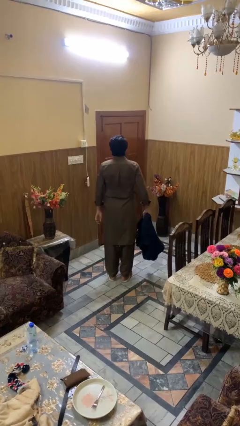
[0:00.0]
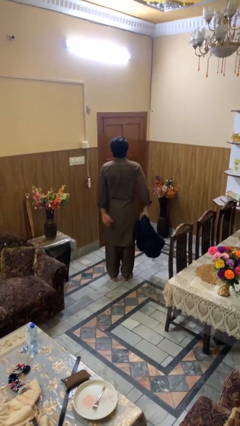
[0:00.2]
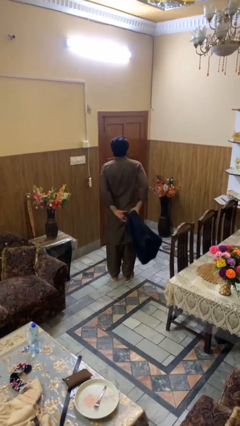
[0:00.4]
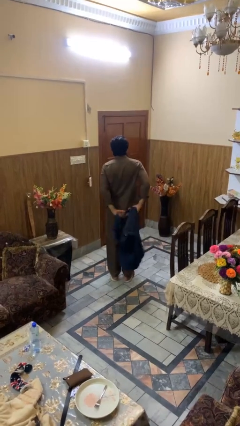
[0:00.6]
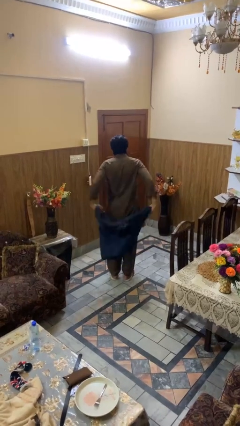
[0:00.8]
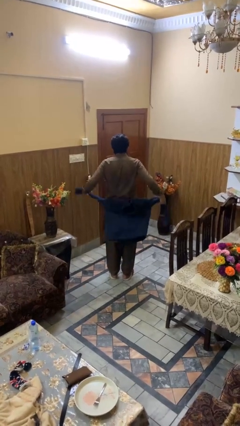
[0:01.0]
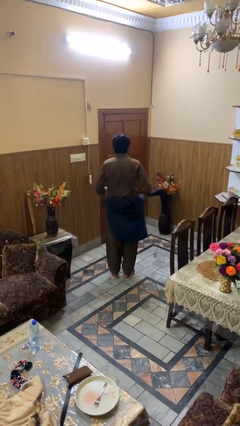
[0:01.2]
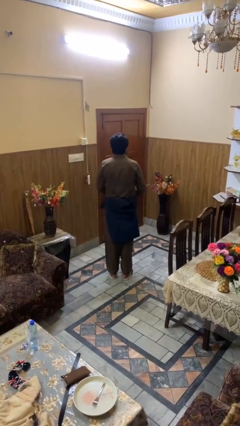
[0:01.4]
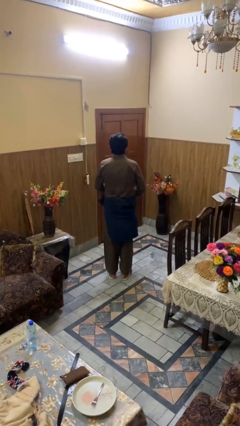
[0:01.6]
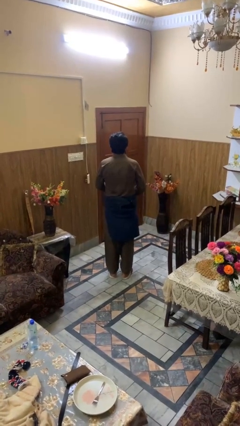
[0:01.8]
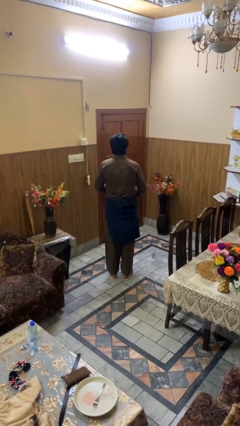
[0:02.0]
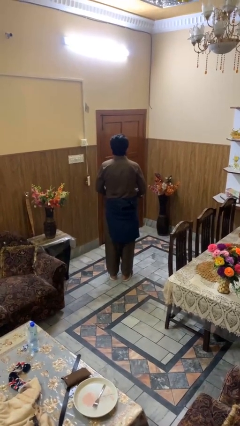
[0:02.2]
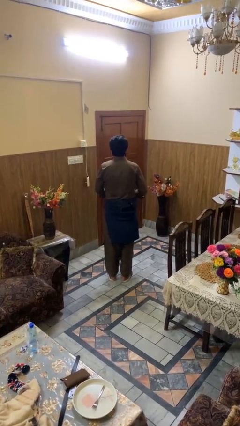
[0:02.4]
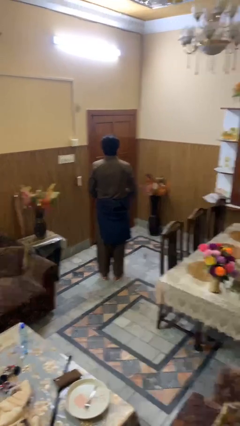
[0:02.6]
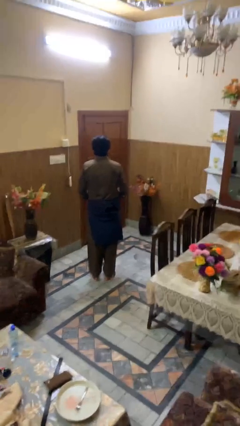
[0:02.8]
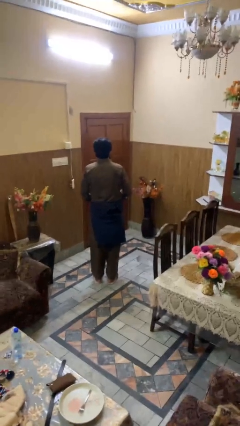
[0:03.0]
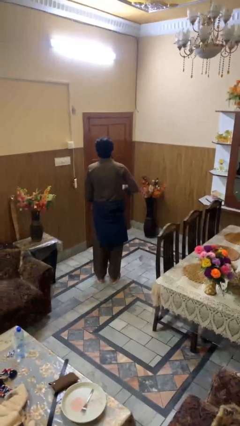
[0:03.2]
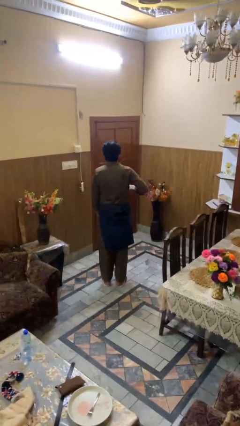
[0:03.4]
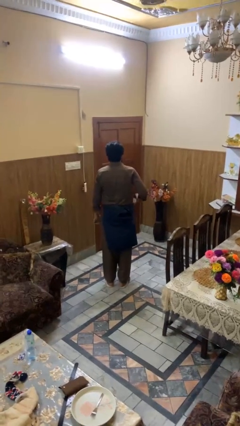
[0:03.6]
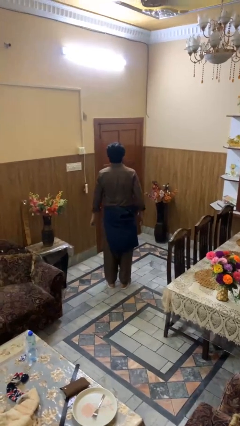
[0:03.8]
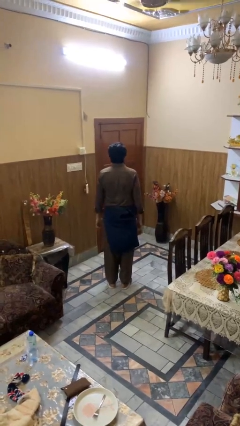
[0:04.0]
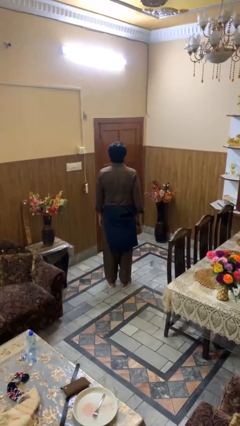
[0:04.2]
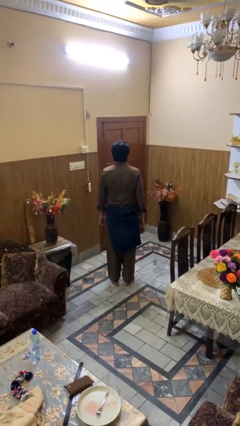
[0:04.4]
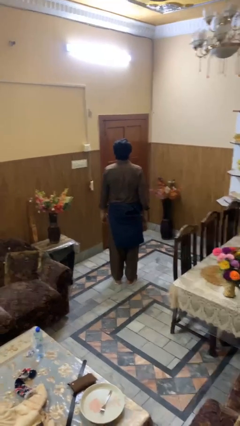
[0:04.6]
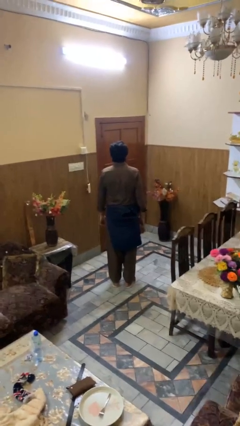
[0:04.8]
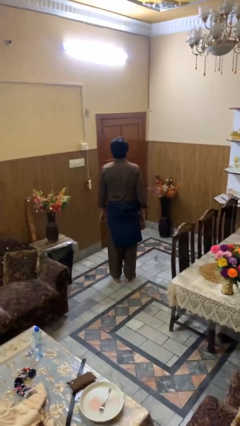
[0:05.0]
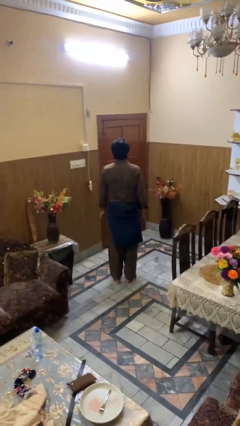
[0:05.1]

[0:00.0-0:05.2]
person ties jacket around waist

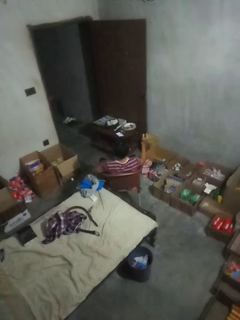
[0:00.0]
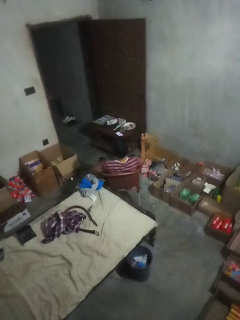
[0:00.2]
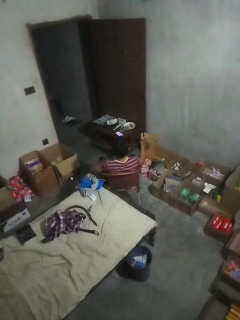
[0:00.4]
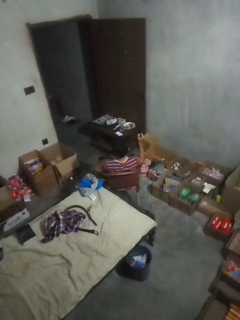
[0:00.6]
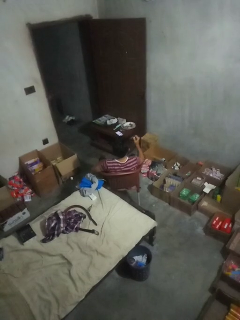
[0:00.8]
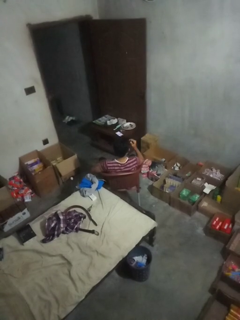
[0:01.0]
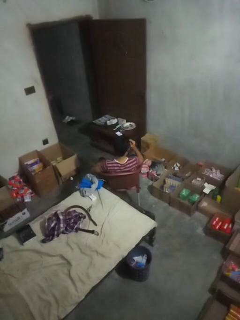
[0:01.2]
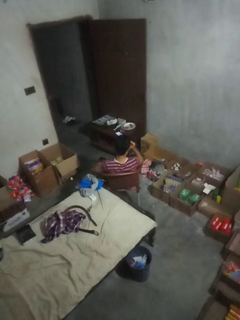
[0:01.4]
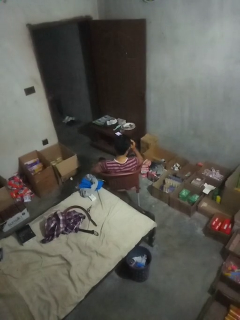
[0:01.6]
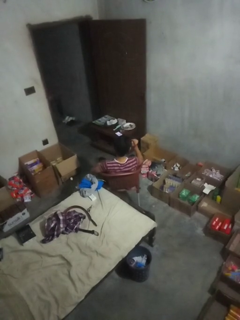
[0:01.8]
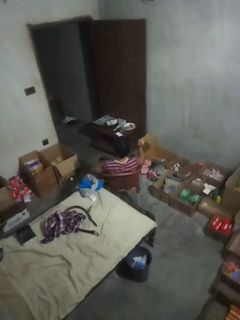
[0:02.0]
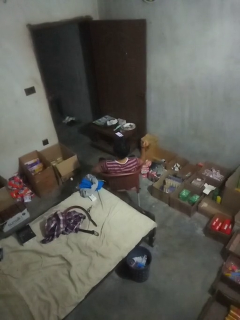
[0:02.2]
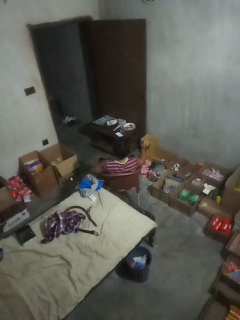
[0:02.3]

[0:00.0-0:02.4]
person puts on sunglasses

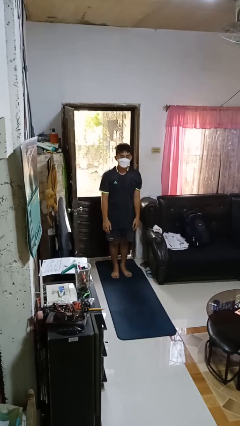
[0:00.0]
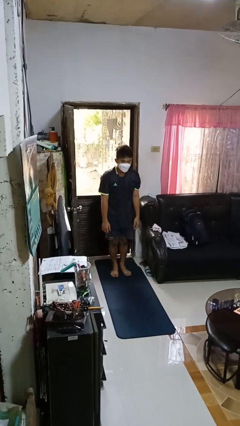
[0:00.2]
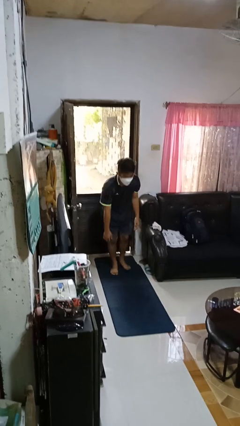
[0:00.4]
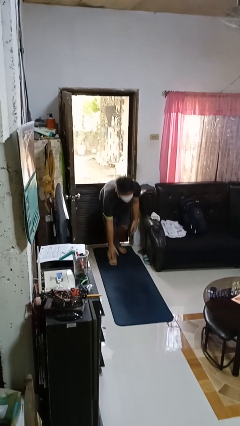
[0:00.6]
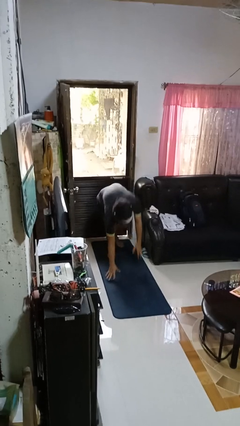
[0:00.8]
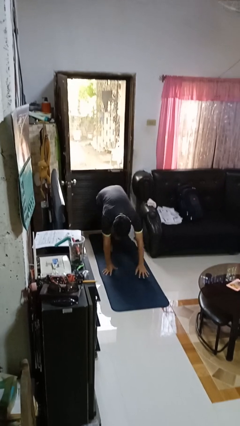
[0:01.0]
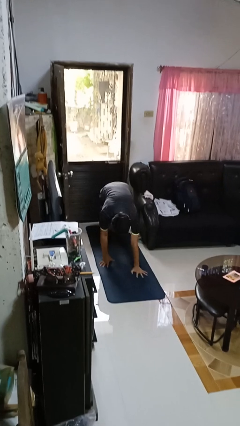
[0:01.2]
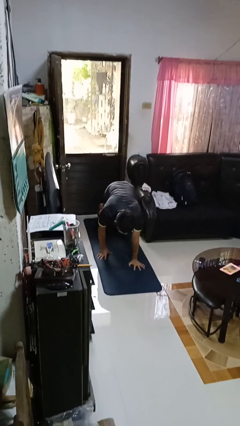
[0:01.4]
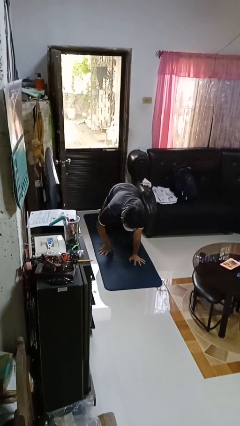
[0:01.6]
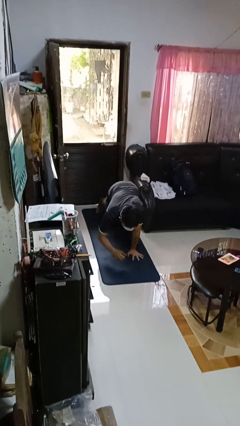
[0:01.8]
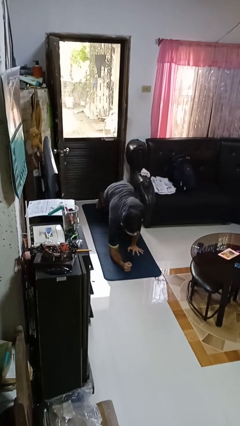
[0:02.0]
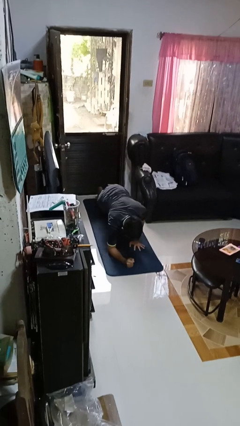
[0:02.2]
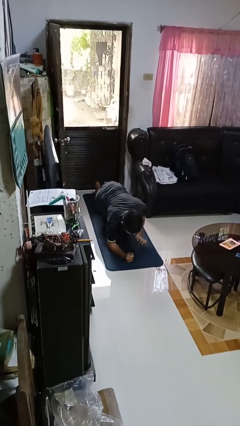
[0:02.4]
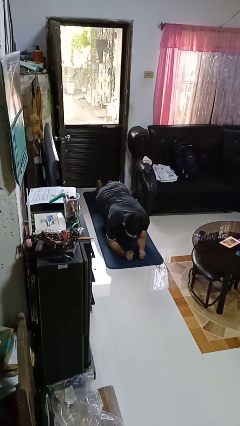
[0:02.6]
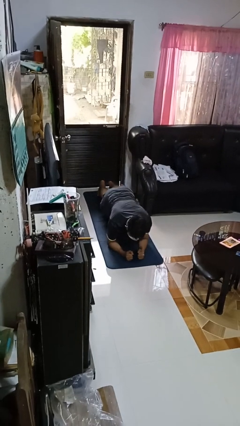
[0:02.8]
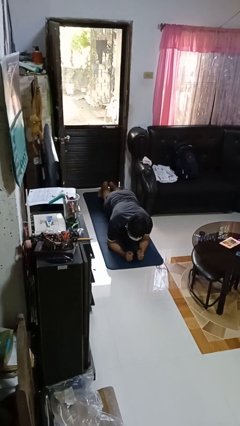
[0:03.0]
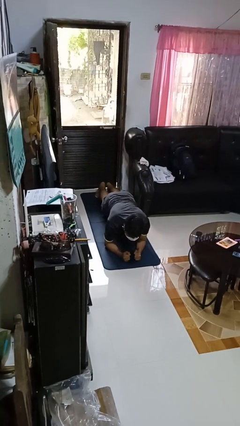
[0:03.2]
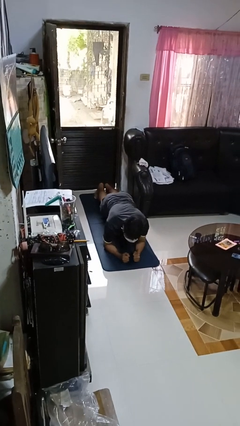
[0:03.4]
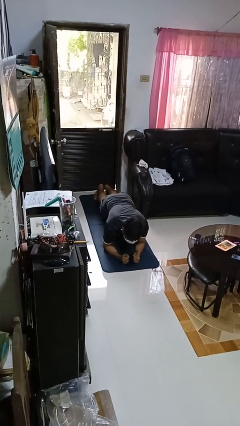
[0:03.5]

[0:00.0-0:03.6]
person exercises with plank

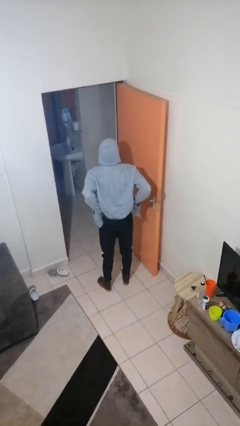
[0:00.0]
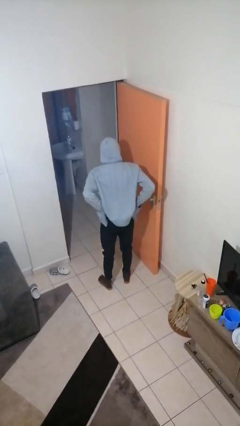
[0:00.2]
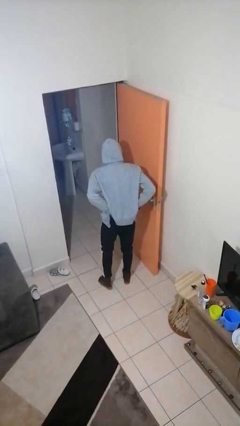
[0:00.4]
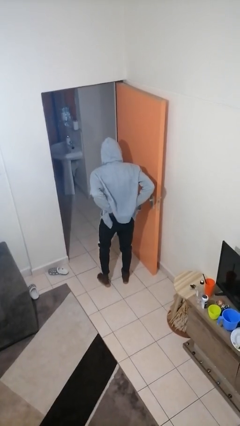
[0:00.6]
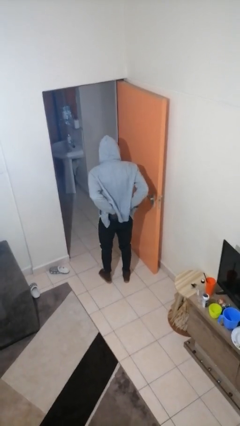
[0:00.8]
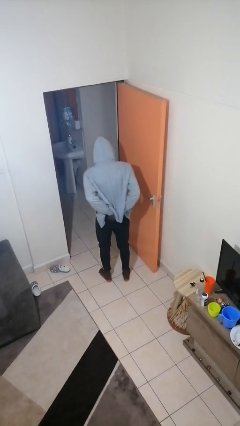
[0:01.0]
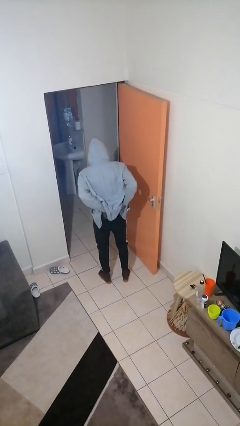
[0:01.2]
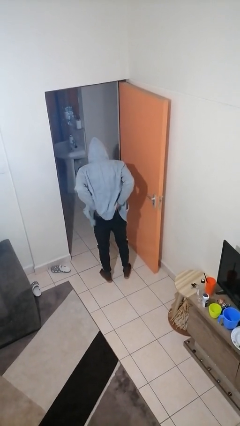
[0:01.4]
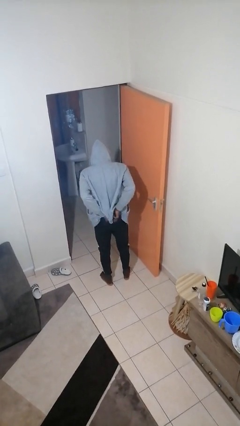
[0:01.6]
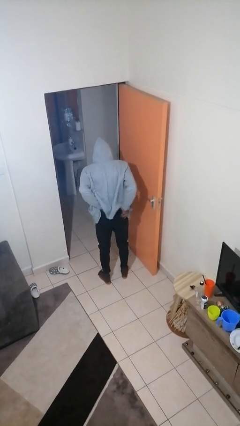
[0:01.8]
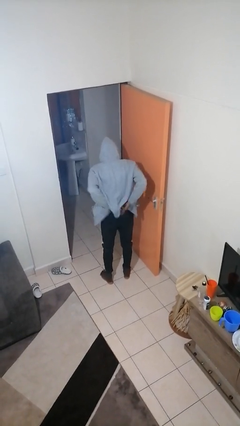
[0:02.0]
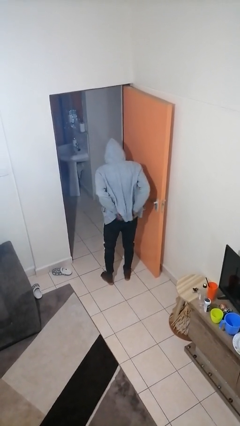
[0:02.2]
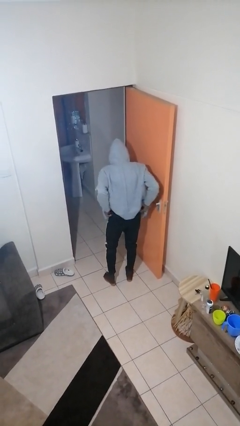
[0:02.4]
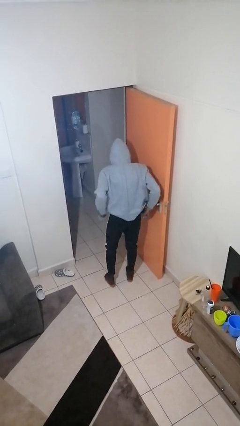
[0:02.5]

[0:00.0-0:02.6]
person hikes up pants

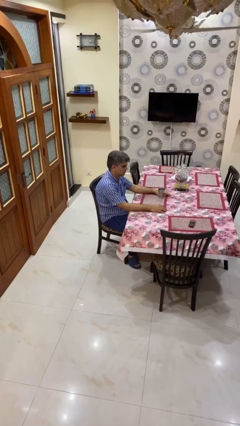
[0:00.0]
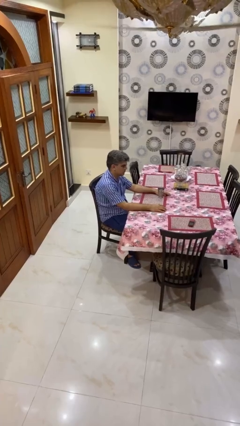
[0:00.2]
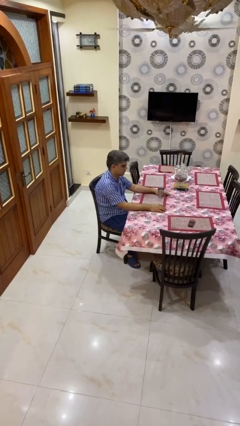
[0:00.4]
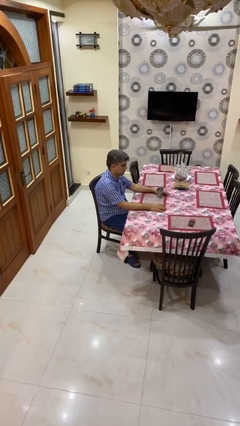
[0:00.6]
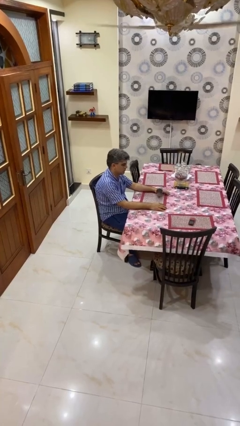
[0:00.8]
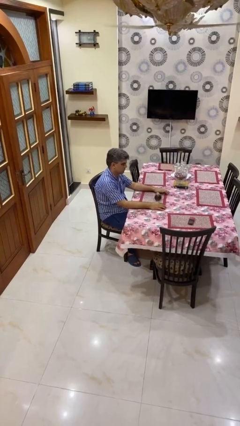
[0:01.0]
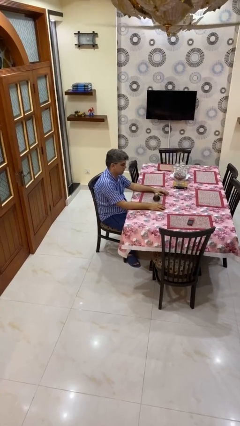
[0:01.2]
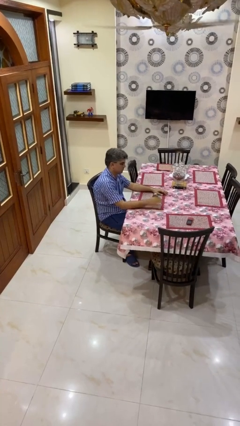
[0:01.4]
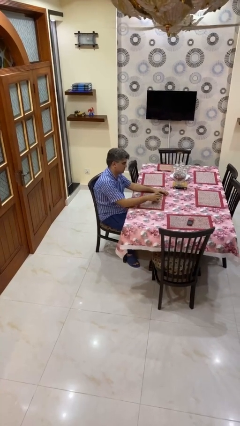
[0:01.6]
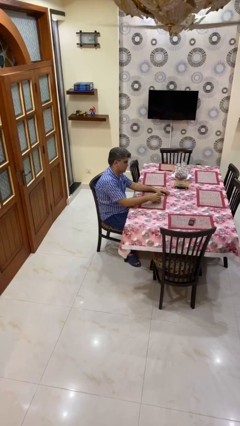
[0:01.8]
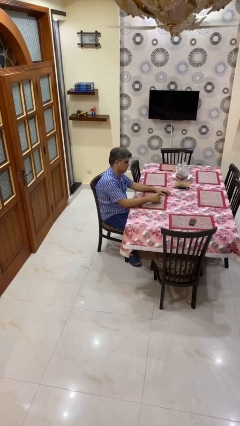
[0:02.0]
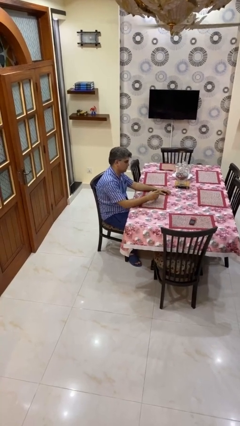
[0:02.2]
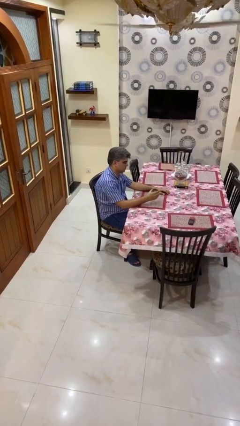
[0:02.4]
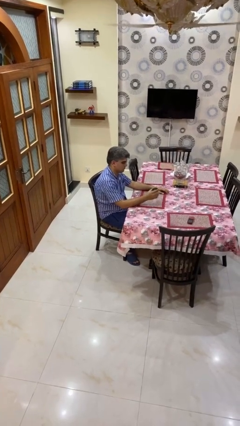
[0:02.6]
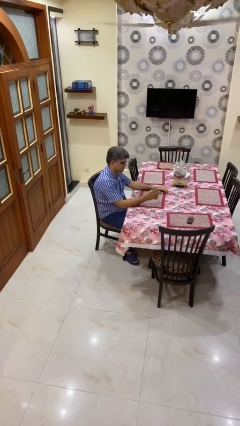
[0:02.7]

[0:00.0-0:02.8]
person knocks over glass

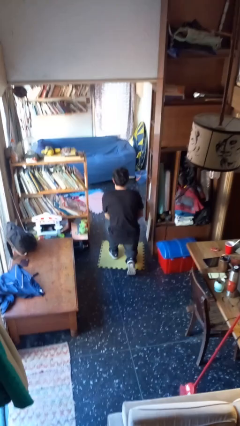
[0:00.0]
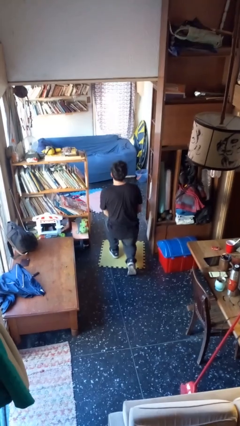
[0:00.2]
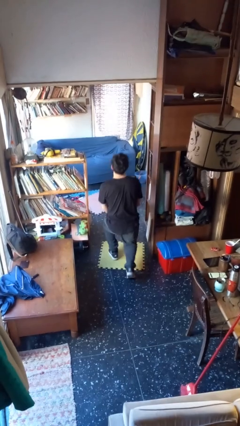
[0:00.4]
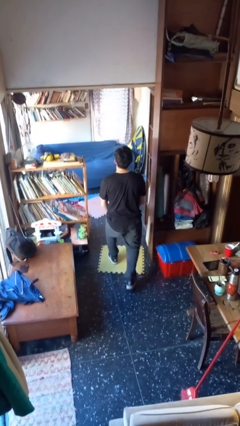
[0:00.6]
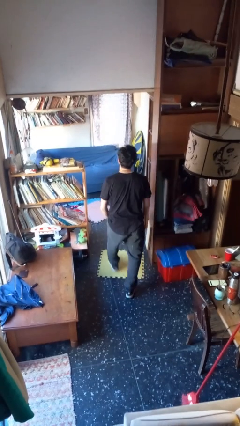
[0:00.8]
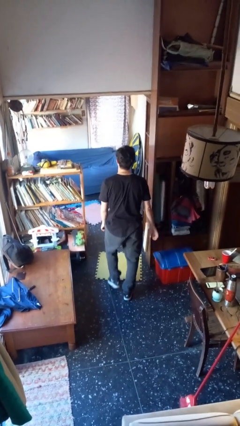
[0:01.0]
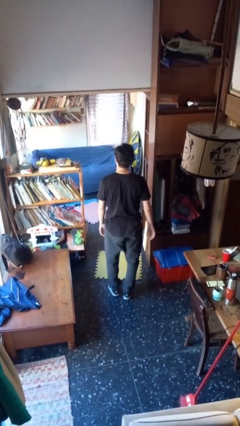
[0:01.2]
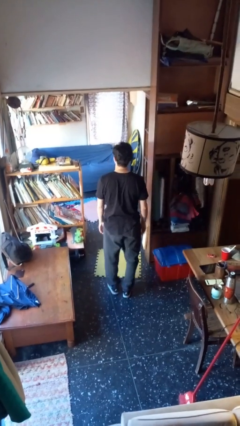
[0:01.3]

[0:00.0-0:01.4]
person stands up from floor
